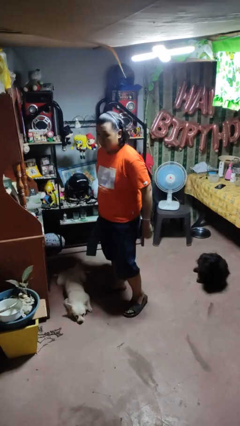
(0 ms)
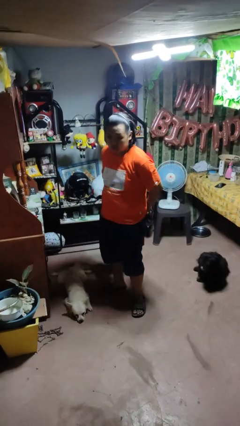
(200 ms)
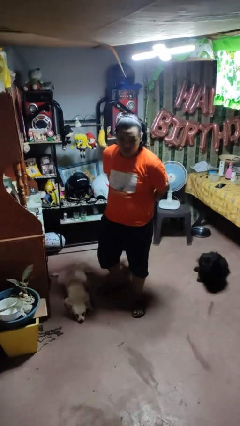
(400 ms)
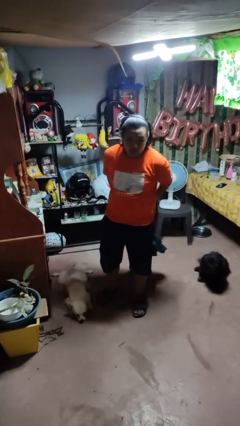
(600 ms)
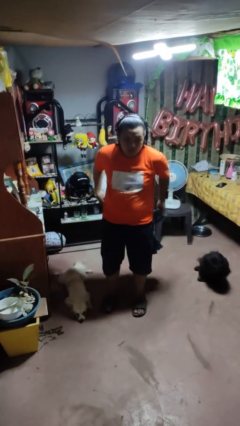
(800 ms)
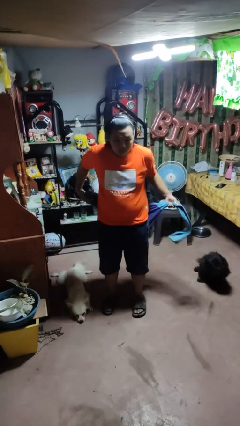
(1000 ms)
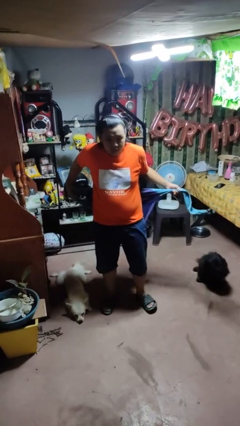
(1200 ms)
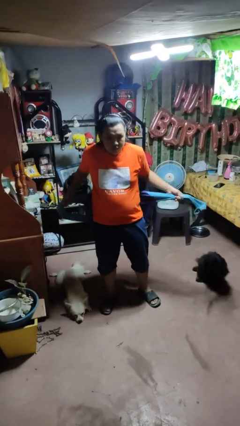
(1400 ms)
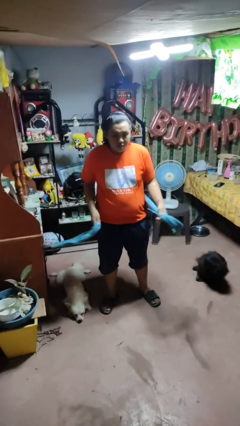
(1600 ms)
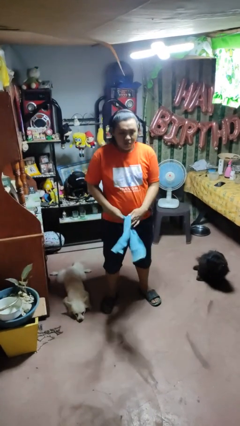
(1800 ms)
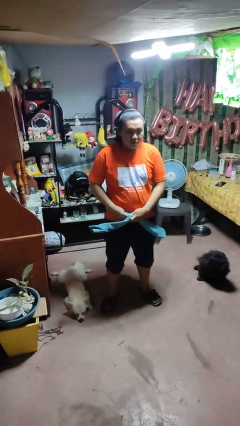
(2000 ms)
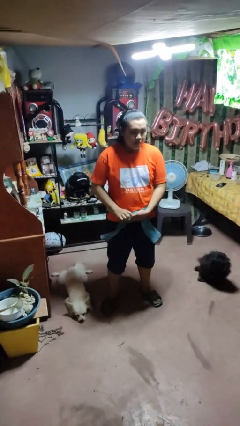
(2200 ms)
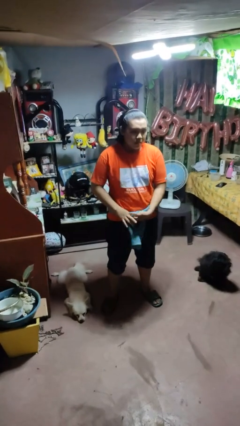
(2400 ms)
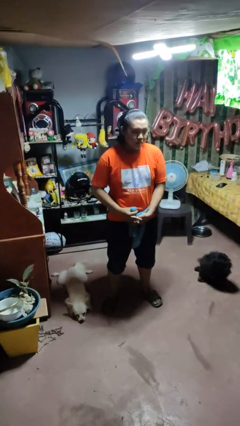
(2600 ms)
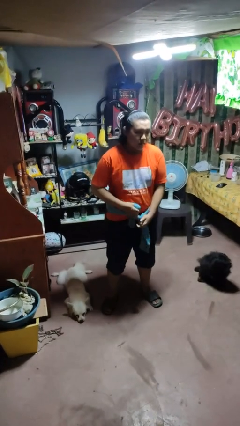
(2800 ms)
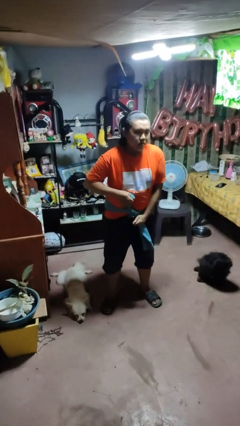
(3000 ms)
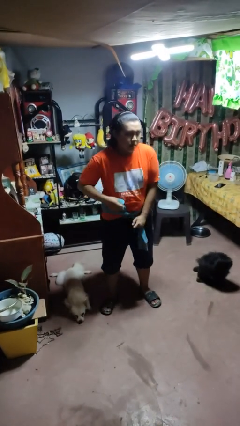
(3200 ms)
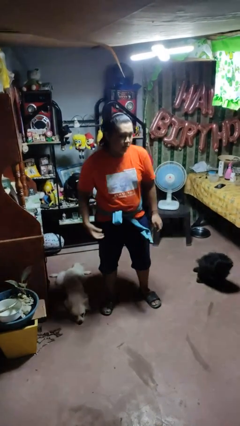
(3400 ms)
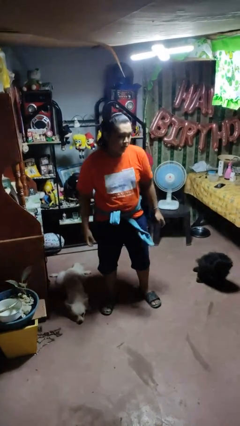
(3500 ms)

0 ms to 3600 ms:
person ties jacket around waist

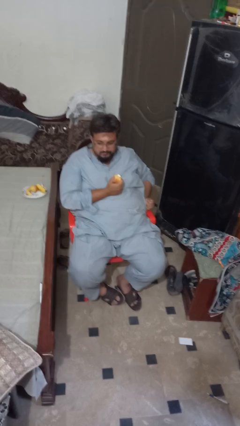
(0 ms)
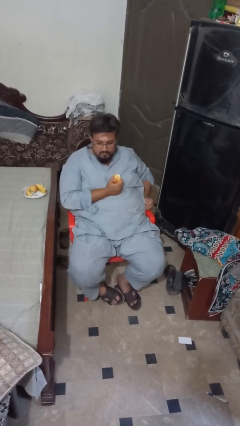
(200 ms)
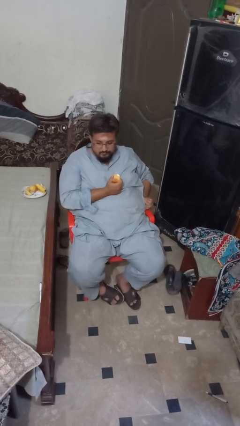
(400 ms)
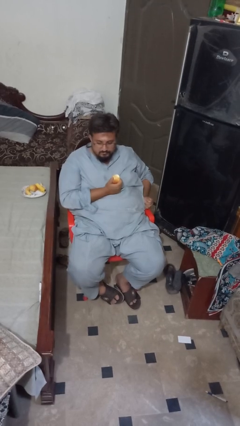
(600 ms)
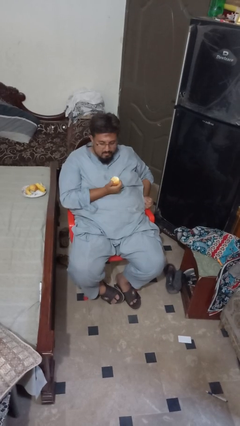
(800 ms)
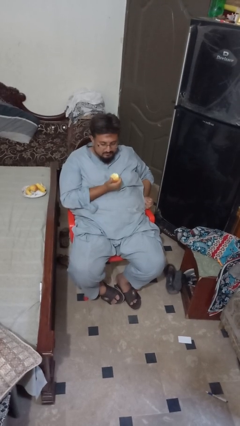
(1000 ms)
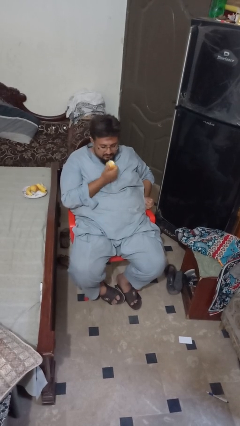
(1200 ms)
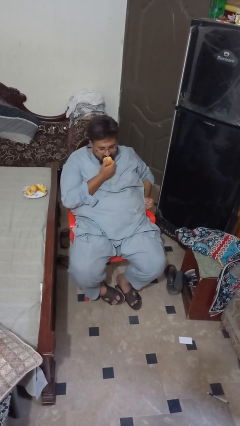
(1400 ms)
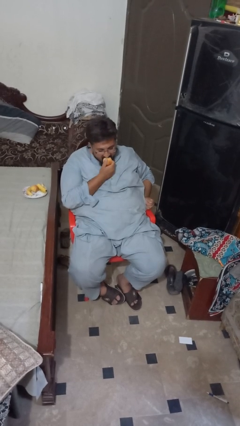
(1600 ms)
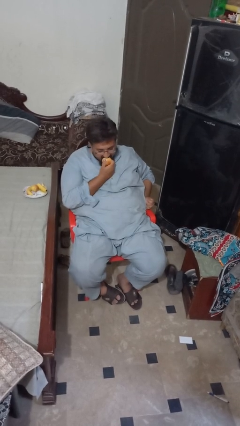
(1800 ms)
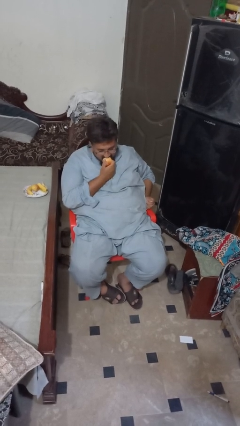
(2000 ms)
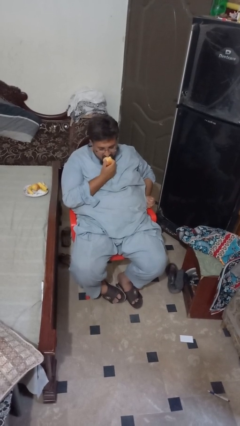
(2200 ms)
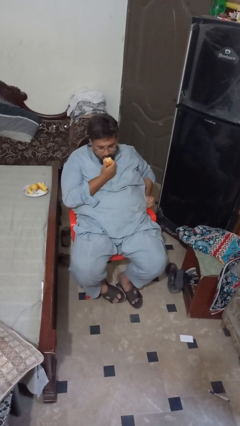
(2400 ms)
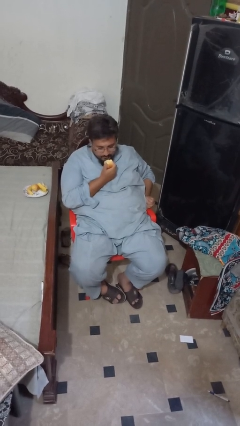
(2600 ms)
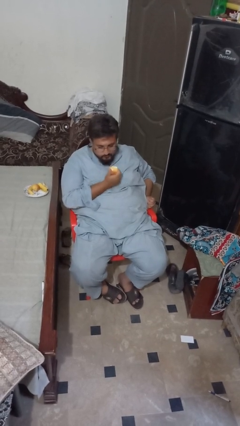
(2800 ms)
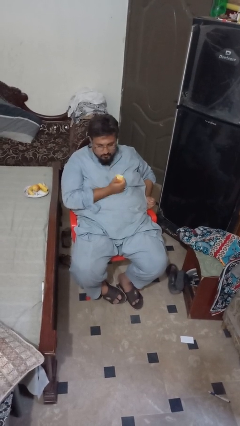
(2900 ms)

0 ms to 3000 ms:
person eats apple

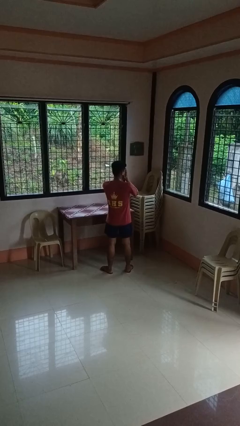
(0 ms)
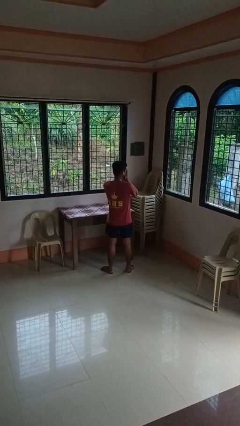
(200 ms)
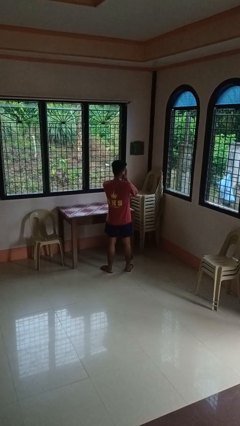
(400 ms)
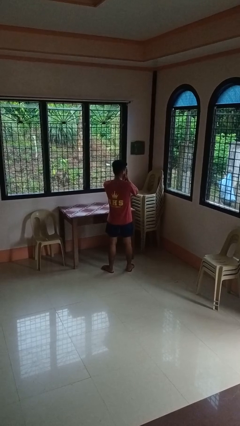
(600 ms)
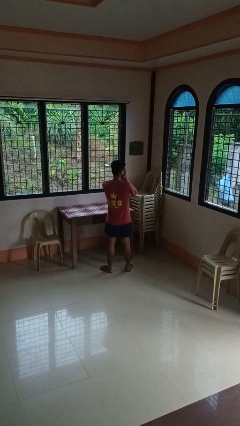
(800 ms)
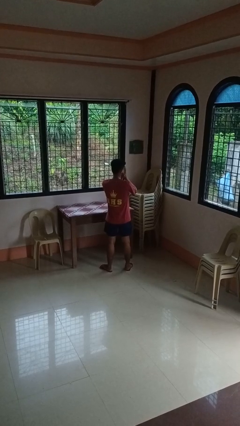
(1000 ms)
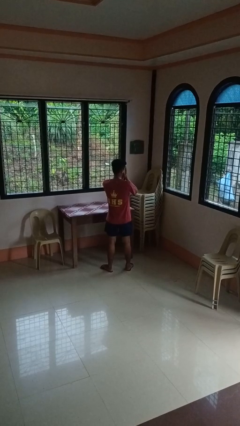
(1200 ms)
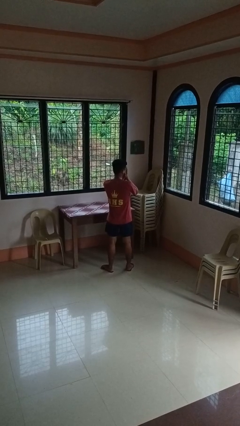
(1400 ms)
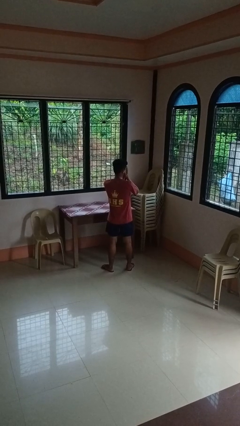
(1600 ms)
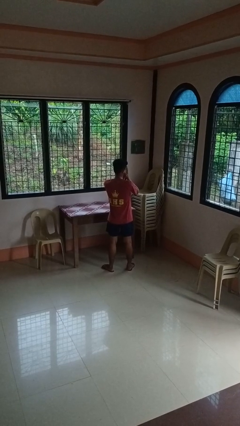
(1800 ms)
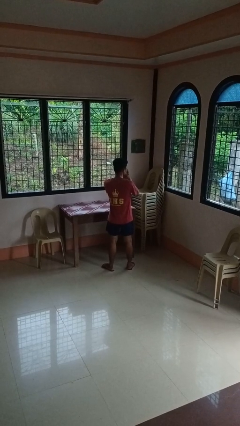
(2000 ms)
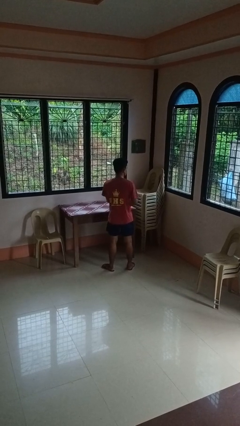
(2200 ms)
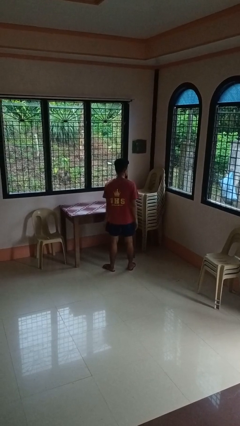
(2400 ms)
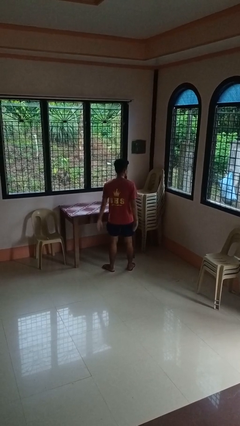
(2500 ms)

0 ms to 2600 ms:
person covers face with hands

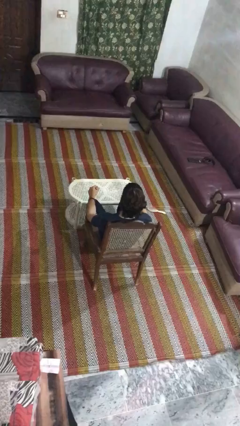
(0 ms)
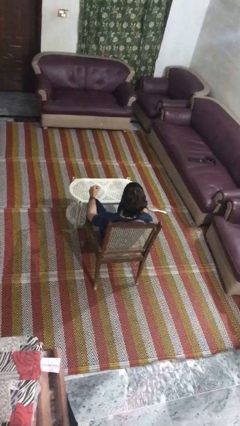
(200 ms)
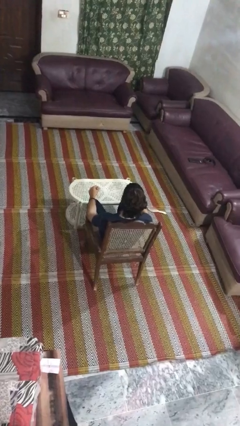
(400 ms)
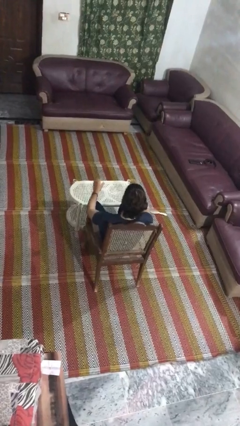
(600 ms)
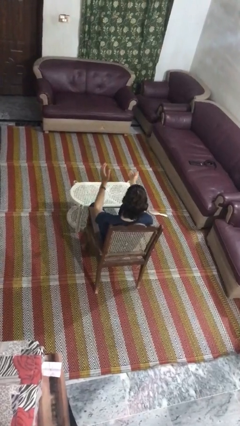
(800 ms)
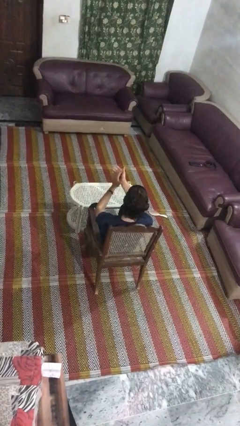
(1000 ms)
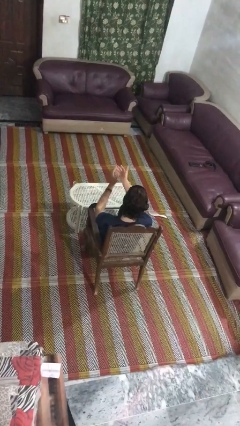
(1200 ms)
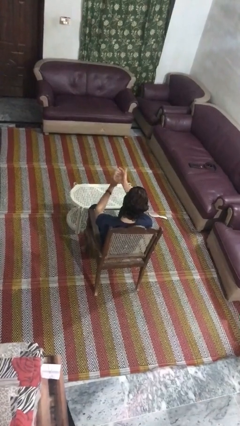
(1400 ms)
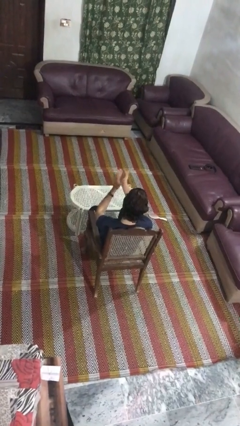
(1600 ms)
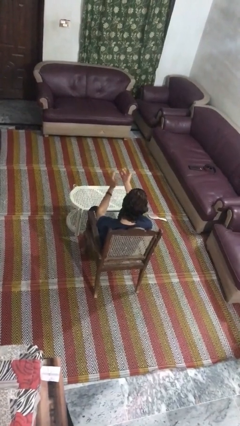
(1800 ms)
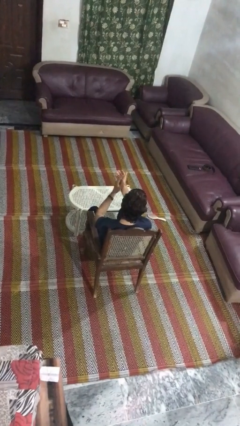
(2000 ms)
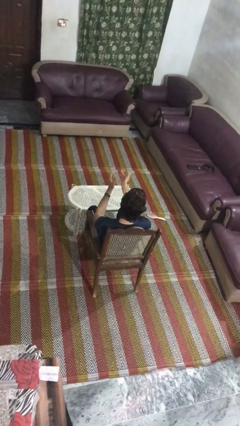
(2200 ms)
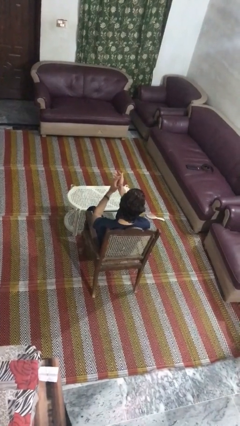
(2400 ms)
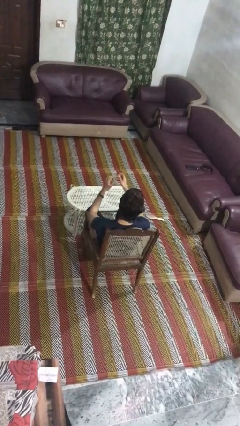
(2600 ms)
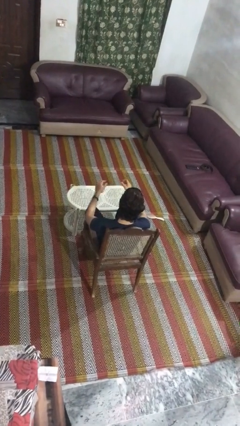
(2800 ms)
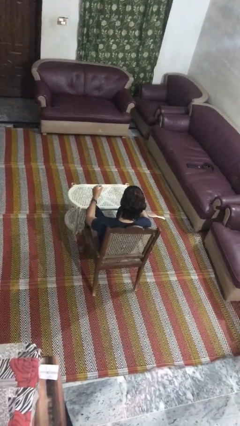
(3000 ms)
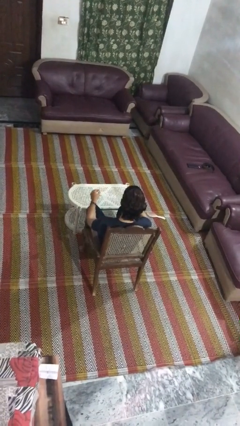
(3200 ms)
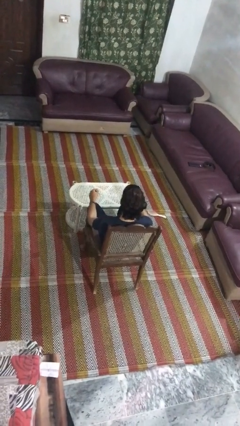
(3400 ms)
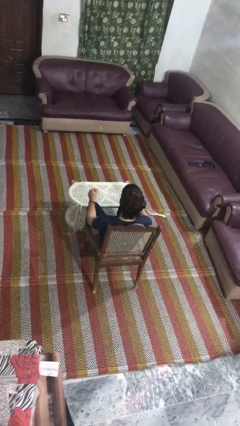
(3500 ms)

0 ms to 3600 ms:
person claps hands

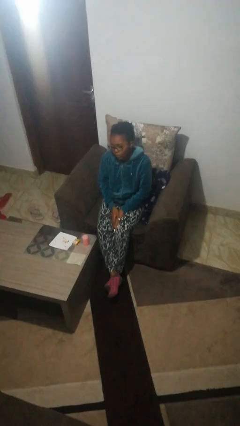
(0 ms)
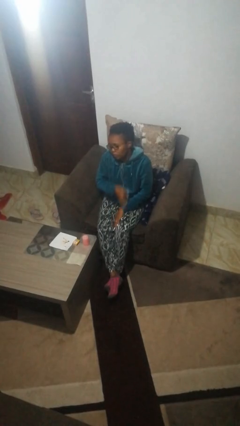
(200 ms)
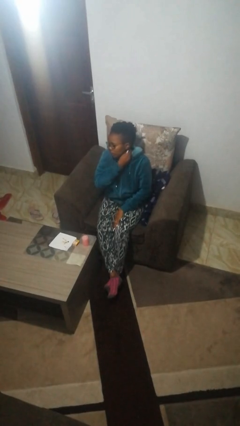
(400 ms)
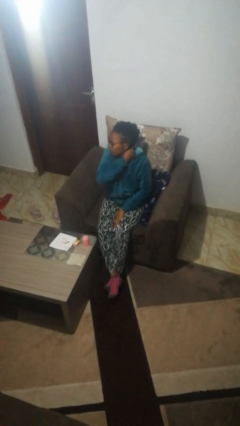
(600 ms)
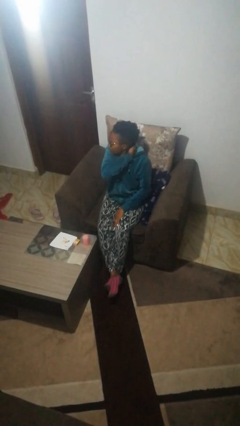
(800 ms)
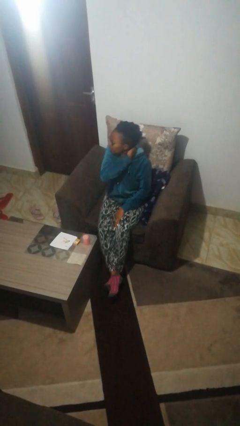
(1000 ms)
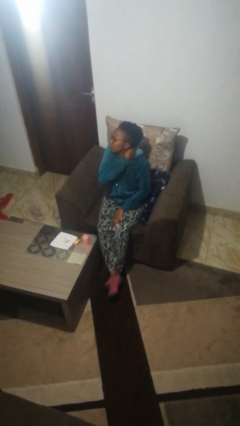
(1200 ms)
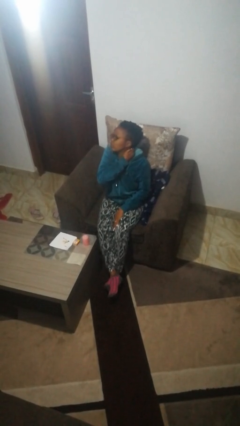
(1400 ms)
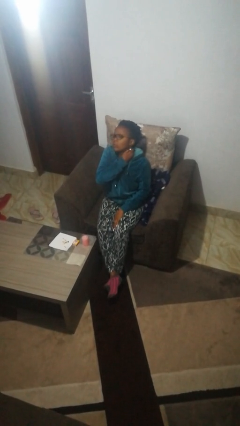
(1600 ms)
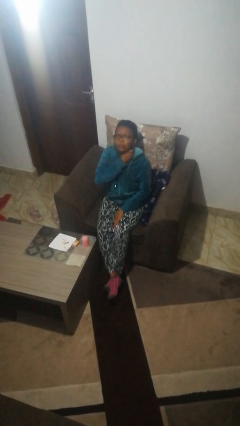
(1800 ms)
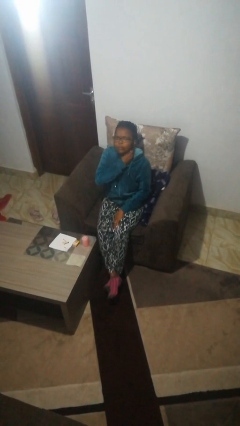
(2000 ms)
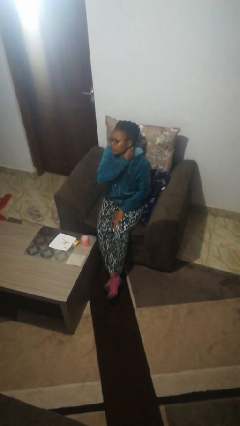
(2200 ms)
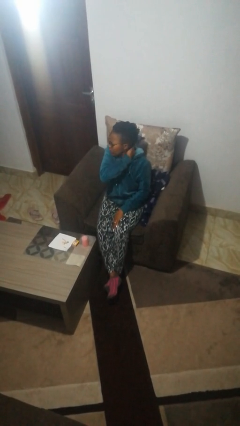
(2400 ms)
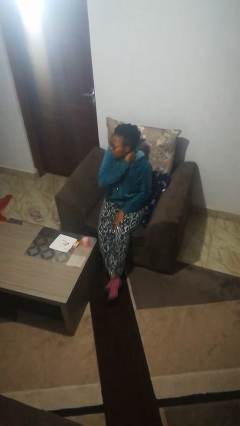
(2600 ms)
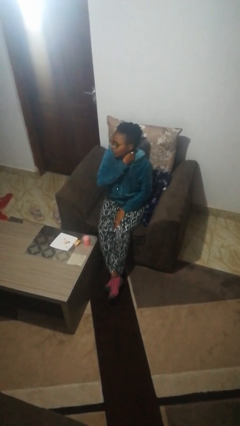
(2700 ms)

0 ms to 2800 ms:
person rubs neck

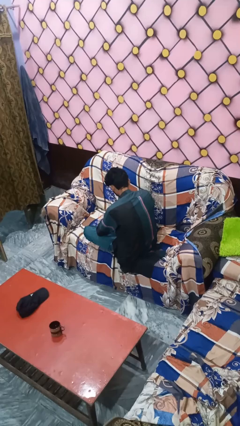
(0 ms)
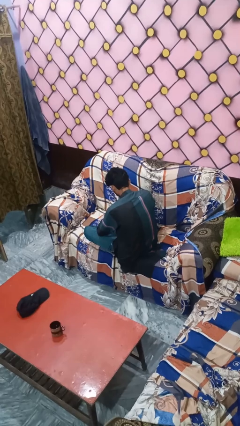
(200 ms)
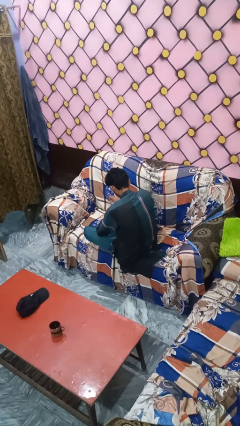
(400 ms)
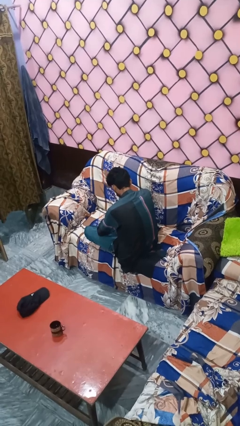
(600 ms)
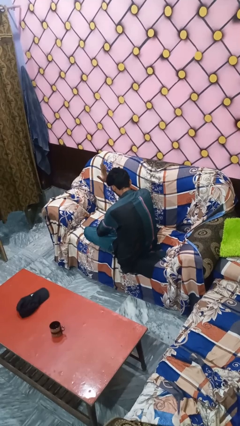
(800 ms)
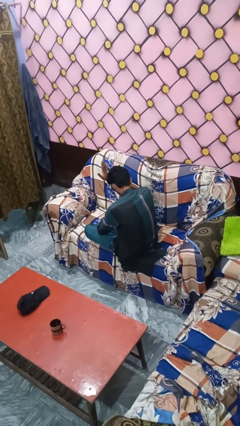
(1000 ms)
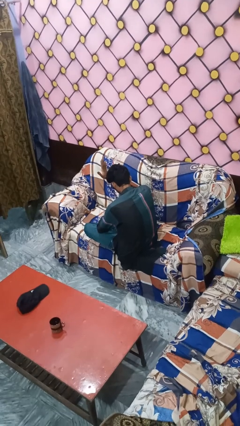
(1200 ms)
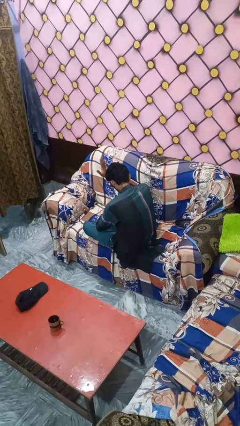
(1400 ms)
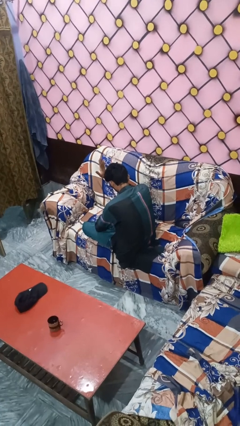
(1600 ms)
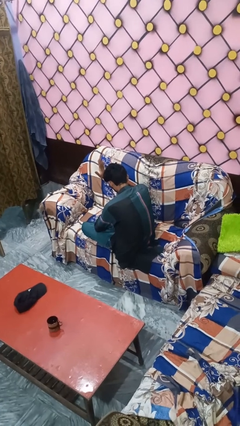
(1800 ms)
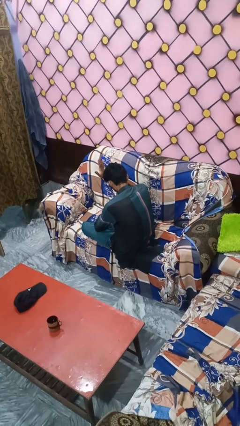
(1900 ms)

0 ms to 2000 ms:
person gestures stop
